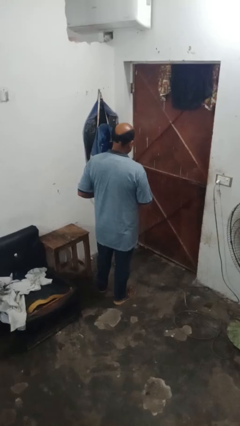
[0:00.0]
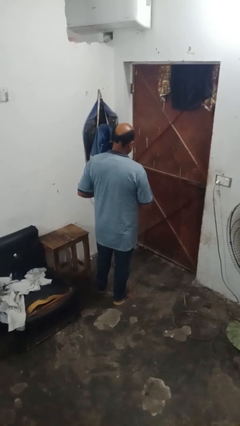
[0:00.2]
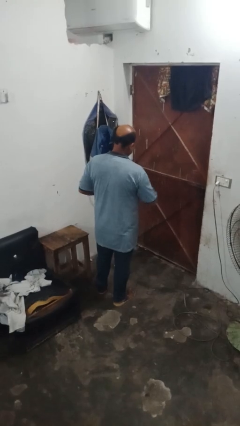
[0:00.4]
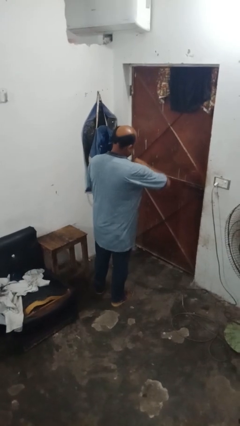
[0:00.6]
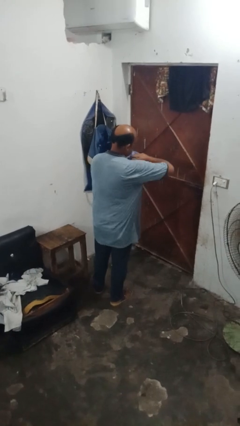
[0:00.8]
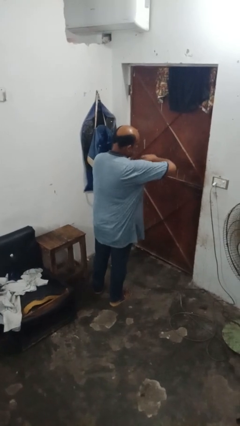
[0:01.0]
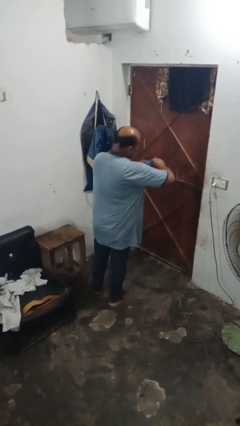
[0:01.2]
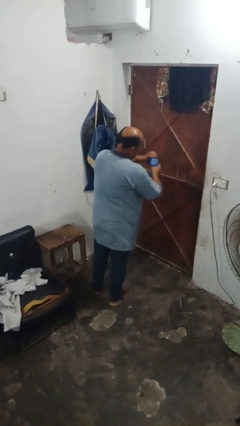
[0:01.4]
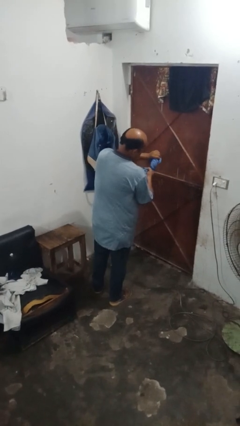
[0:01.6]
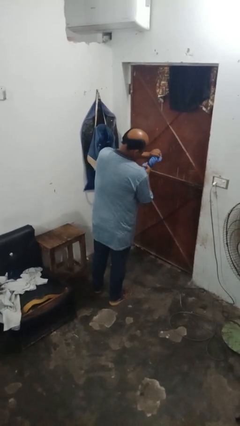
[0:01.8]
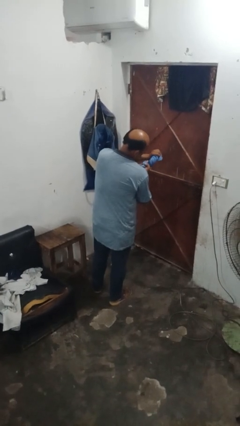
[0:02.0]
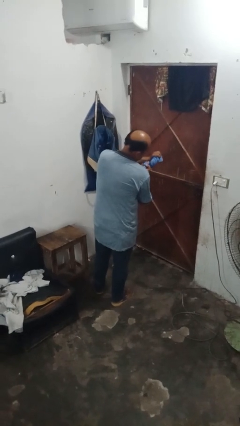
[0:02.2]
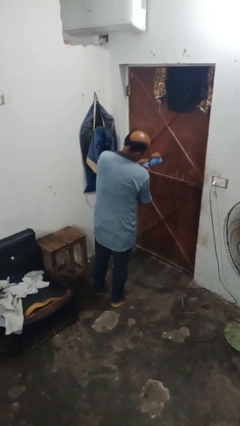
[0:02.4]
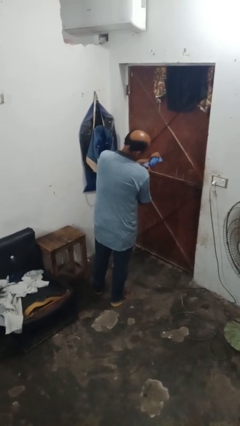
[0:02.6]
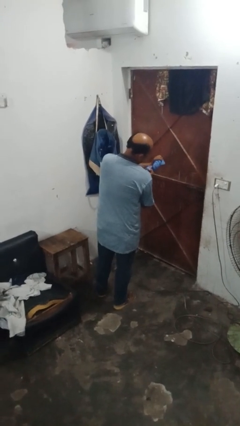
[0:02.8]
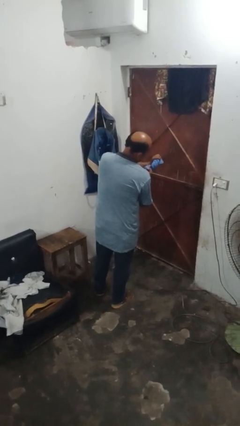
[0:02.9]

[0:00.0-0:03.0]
person squeezes object

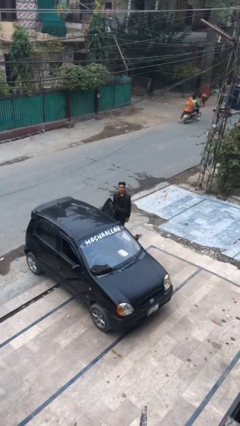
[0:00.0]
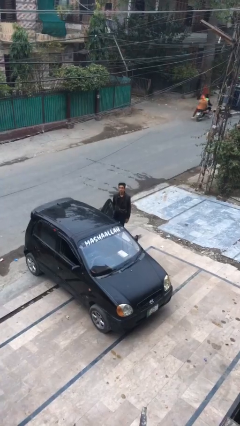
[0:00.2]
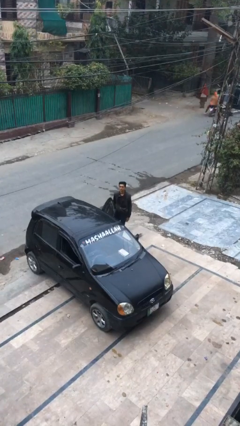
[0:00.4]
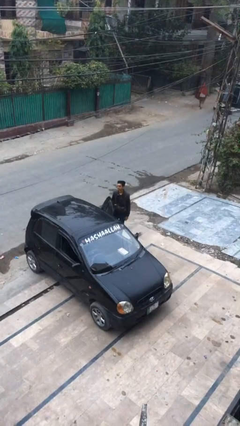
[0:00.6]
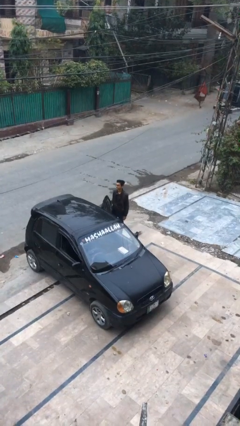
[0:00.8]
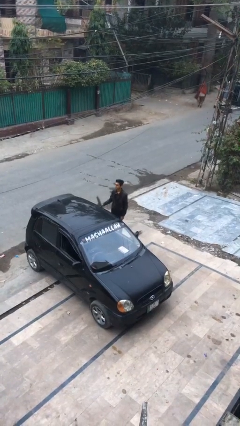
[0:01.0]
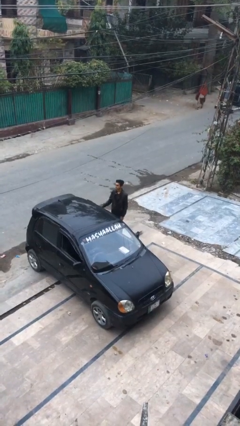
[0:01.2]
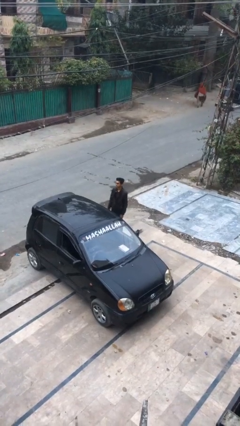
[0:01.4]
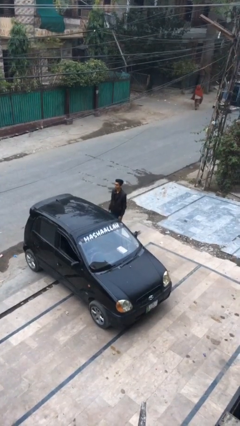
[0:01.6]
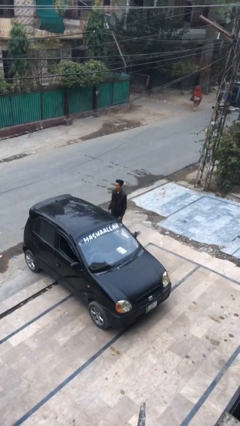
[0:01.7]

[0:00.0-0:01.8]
person closes car door

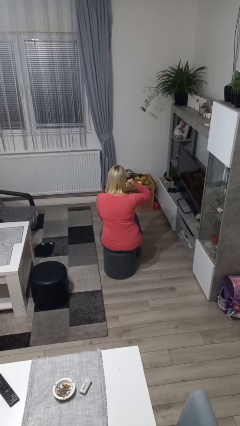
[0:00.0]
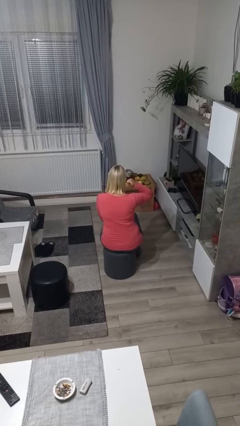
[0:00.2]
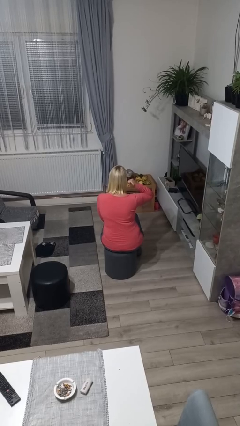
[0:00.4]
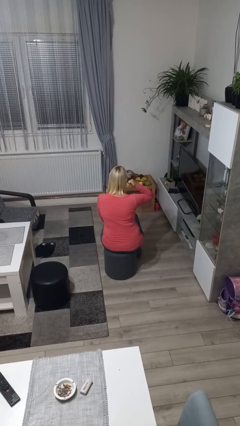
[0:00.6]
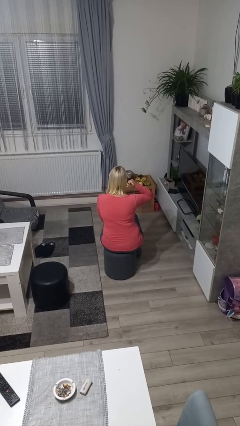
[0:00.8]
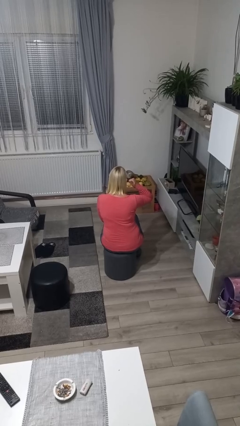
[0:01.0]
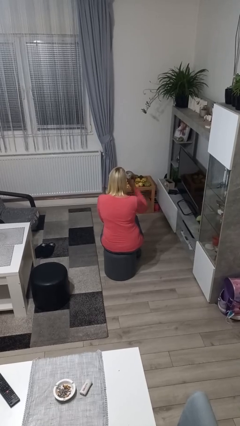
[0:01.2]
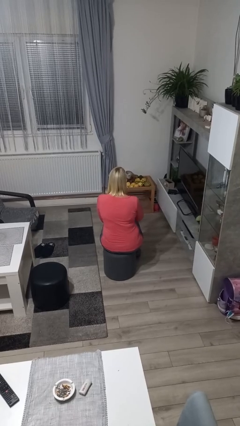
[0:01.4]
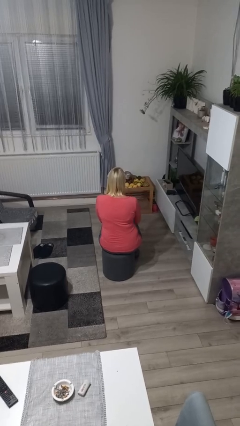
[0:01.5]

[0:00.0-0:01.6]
person gestures call me

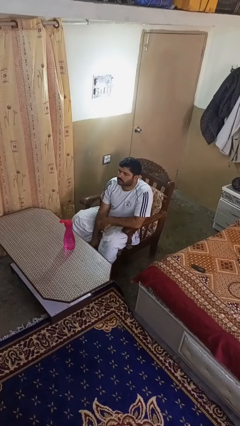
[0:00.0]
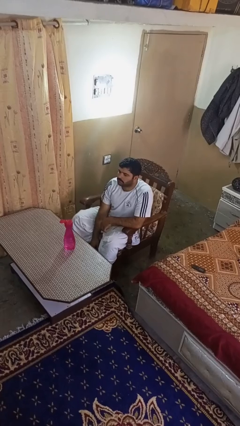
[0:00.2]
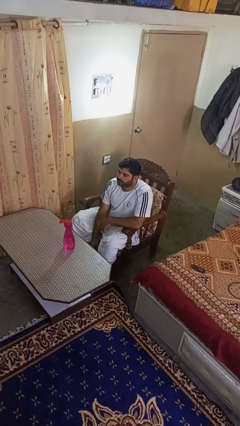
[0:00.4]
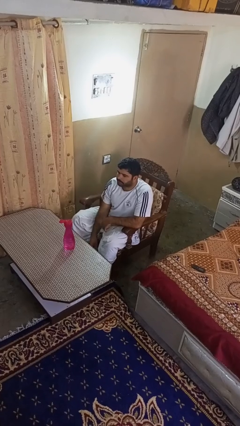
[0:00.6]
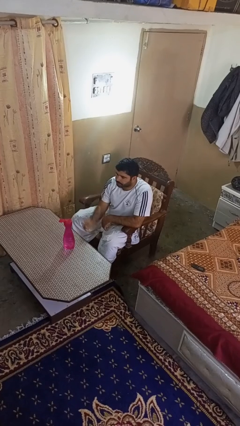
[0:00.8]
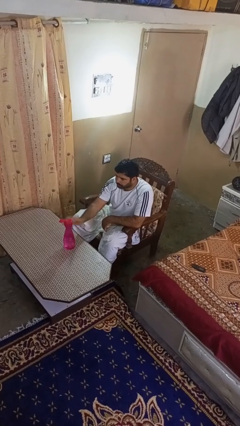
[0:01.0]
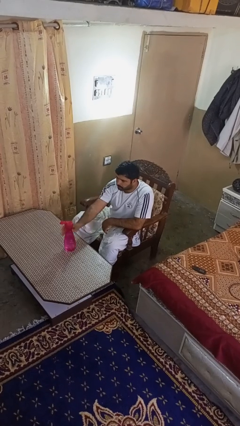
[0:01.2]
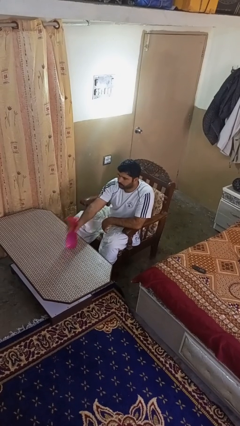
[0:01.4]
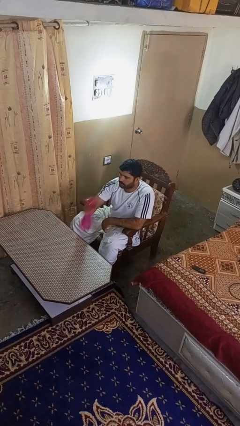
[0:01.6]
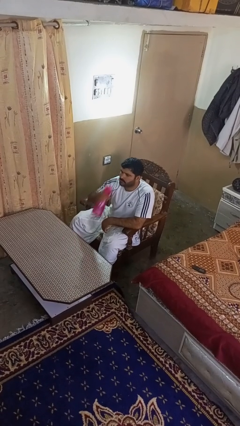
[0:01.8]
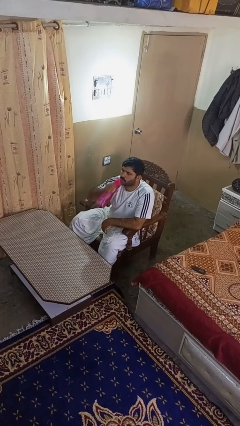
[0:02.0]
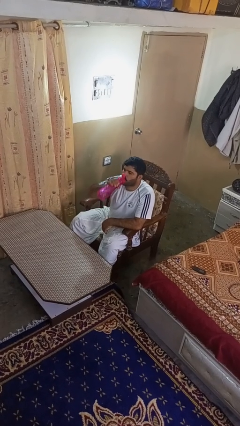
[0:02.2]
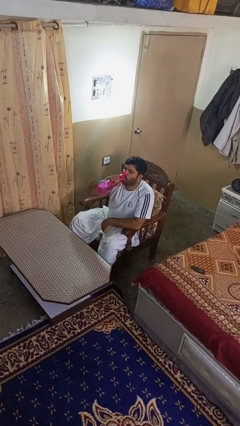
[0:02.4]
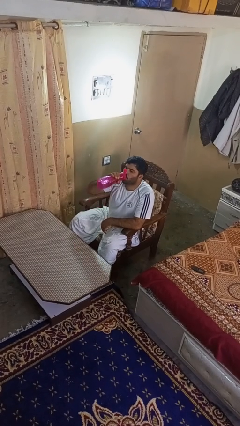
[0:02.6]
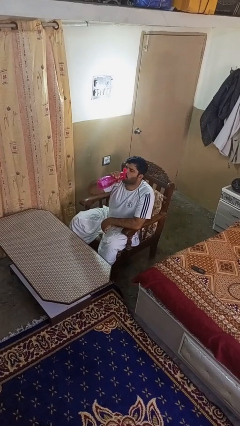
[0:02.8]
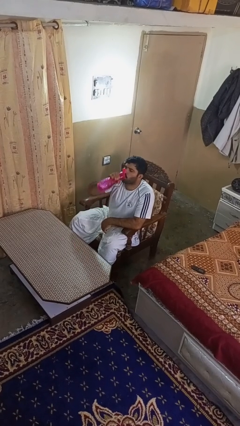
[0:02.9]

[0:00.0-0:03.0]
person drinks from bottle

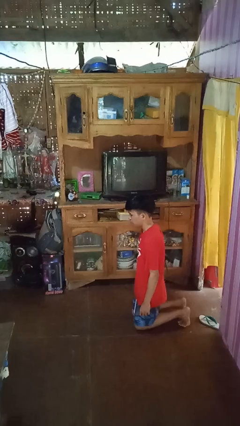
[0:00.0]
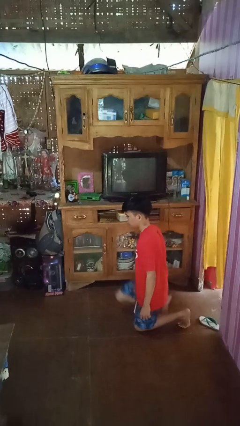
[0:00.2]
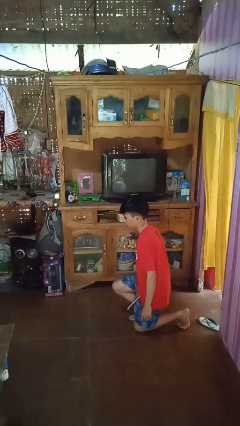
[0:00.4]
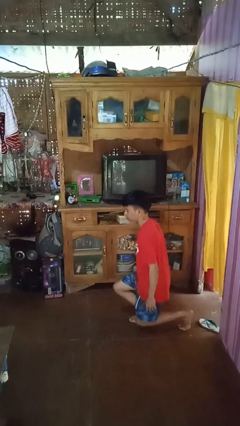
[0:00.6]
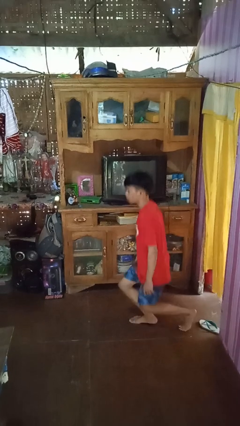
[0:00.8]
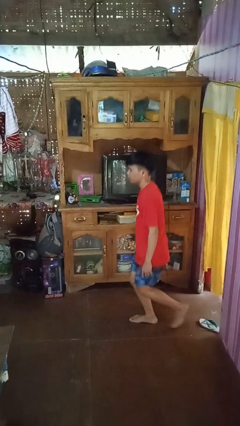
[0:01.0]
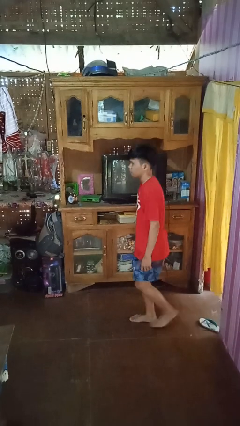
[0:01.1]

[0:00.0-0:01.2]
person stands up from floor

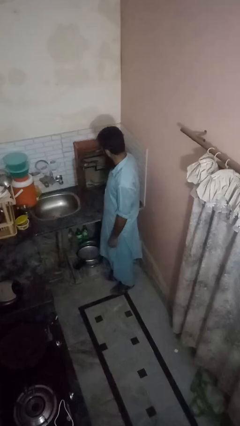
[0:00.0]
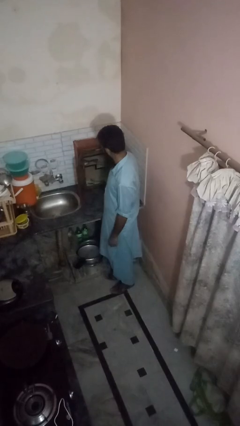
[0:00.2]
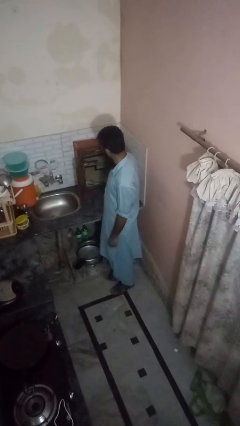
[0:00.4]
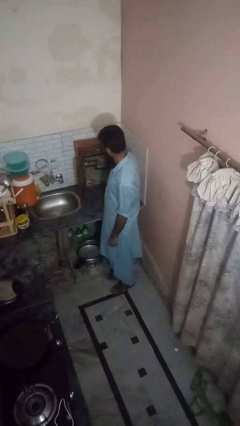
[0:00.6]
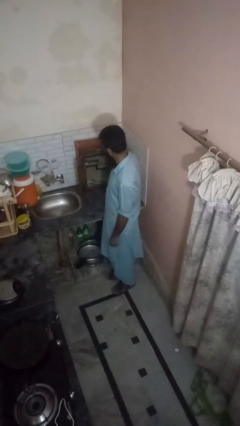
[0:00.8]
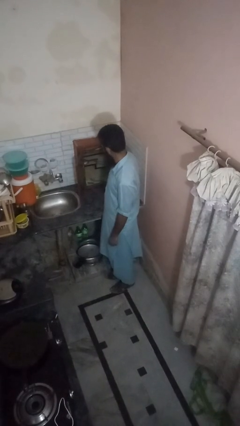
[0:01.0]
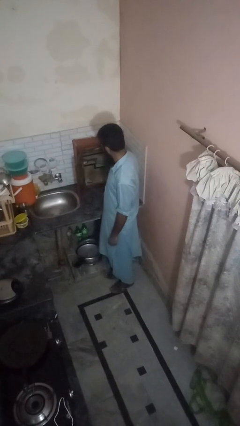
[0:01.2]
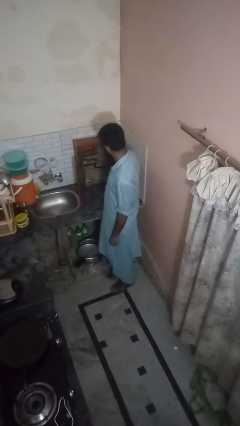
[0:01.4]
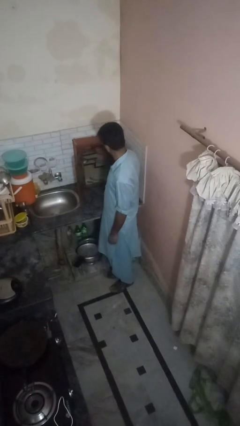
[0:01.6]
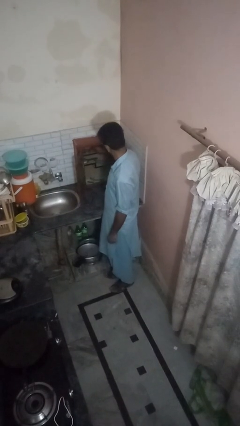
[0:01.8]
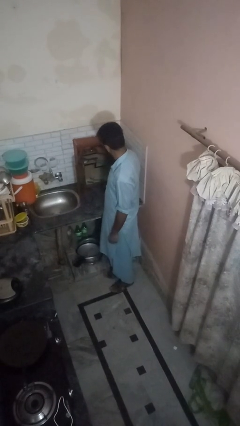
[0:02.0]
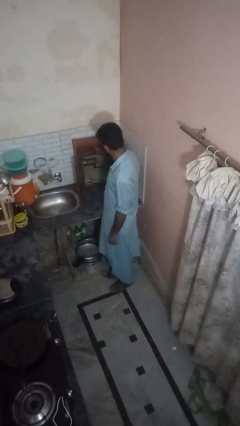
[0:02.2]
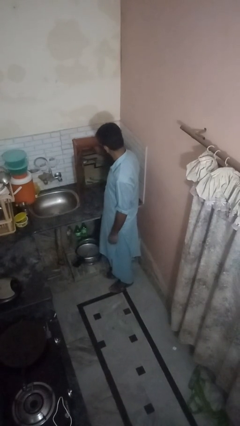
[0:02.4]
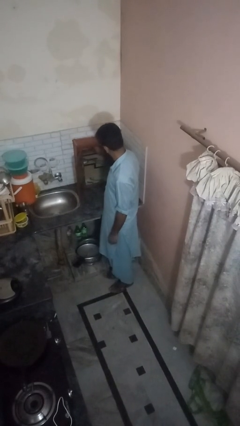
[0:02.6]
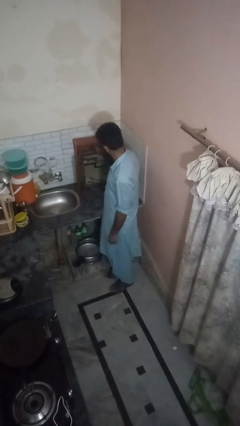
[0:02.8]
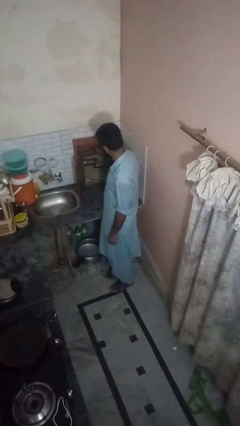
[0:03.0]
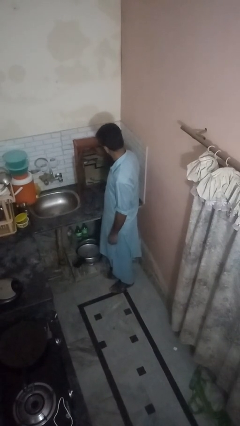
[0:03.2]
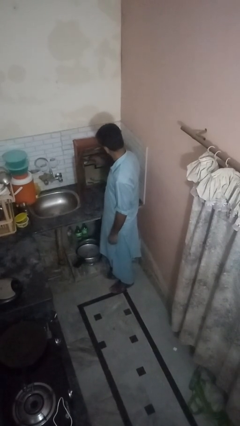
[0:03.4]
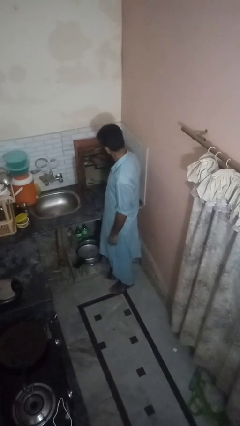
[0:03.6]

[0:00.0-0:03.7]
person searches in kitchen drawer

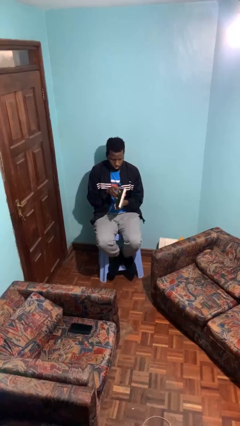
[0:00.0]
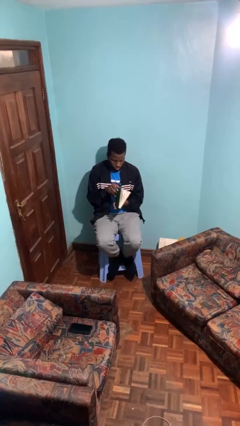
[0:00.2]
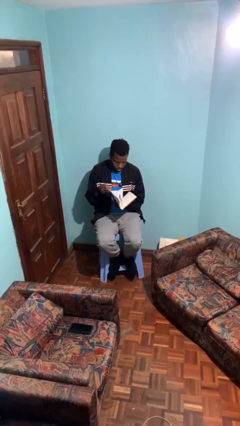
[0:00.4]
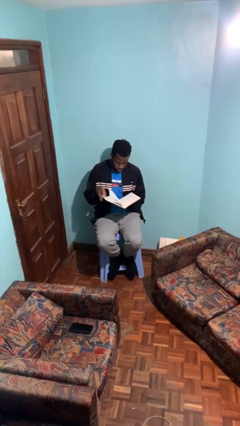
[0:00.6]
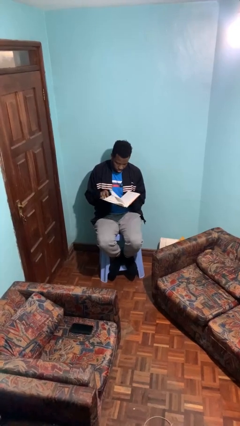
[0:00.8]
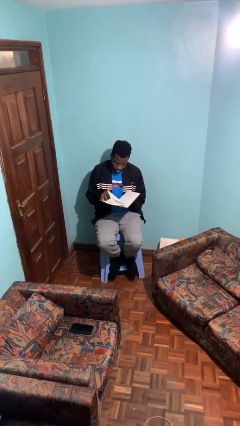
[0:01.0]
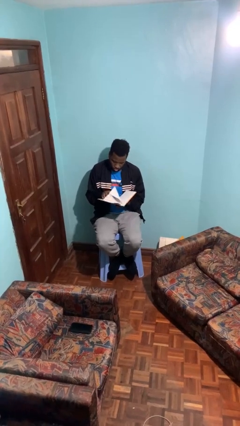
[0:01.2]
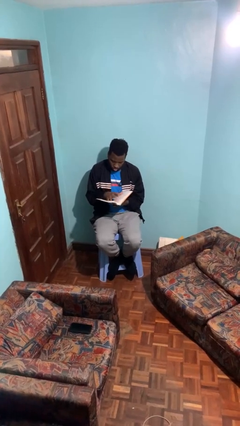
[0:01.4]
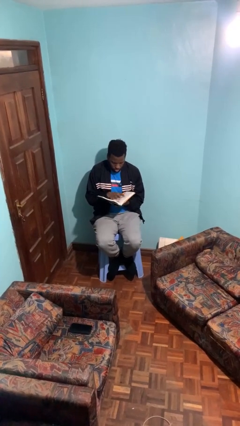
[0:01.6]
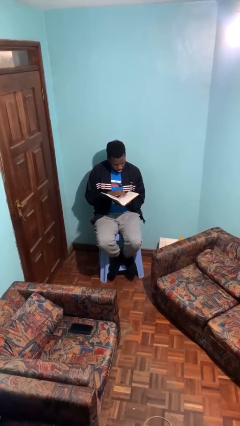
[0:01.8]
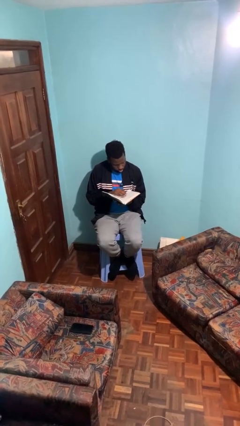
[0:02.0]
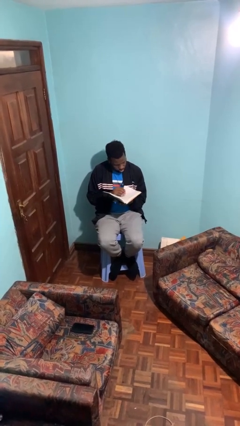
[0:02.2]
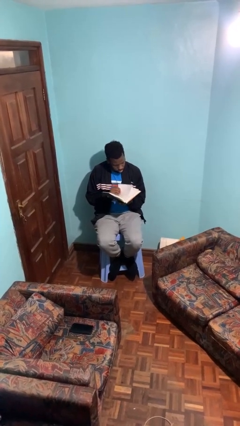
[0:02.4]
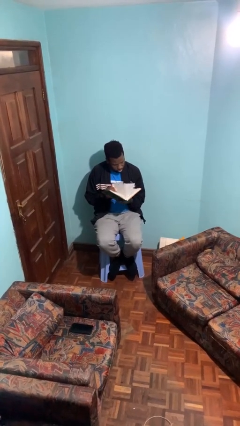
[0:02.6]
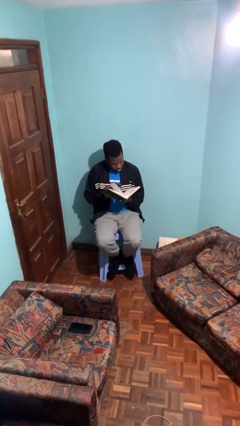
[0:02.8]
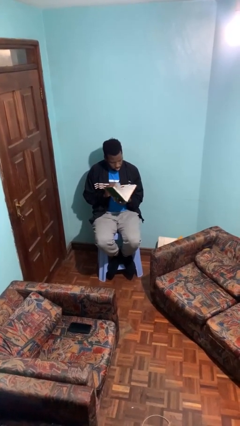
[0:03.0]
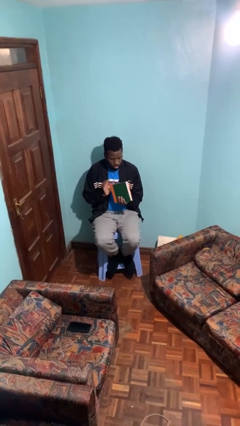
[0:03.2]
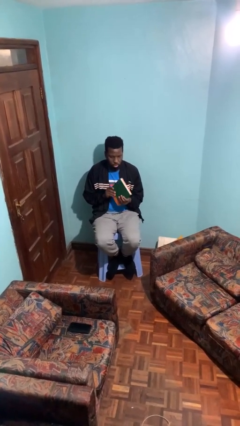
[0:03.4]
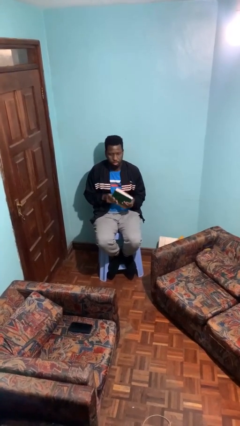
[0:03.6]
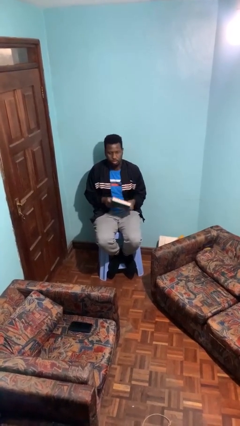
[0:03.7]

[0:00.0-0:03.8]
person reads book
